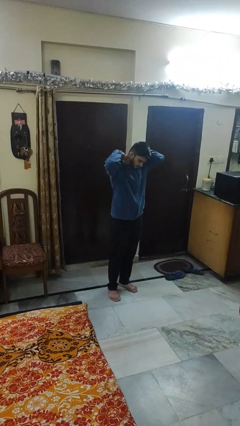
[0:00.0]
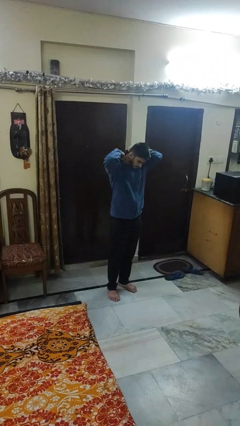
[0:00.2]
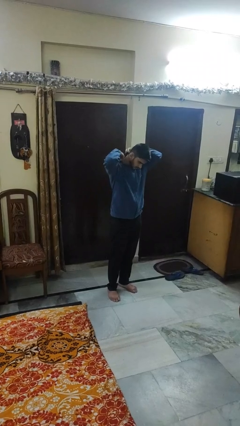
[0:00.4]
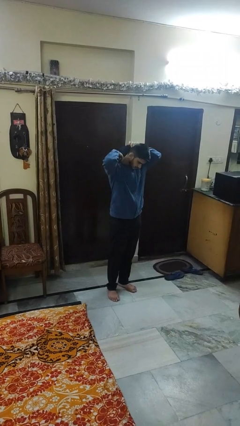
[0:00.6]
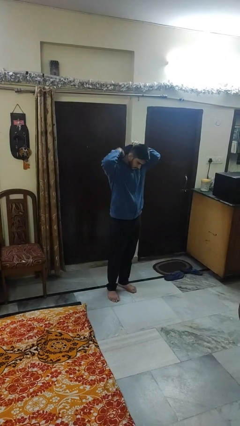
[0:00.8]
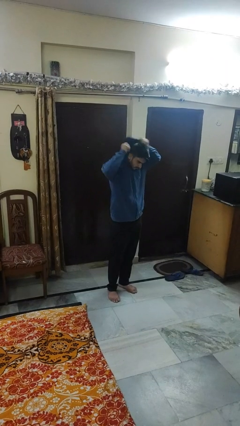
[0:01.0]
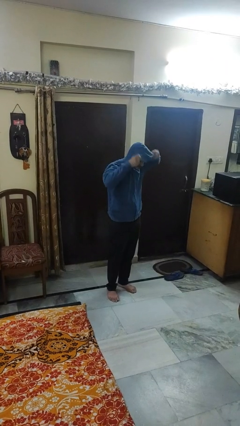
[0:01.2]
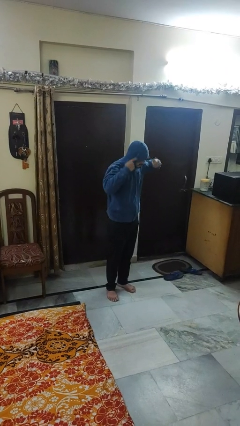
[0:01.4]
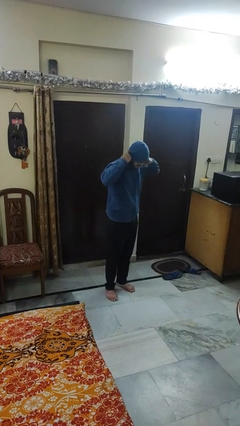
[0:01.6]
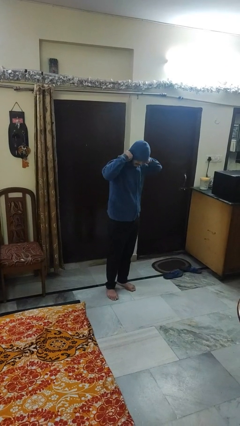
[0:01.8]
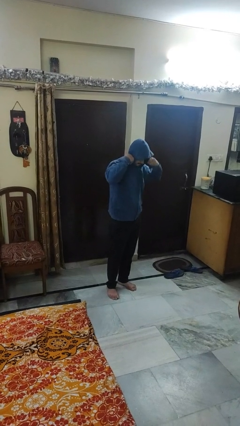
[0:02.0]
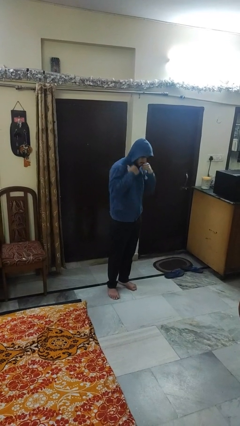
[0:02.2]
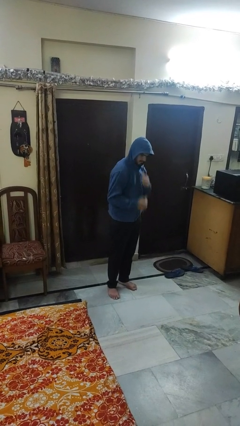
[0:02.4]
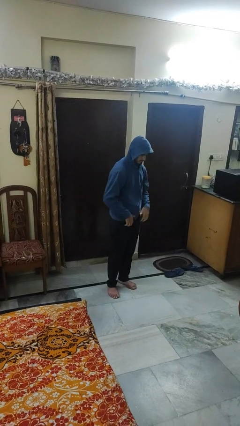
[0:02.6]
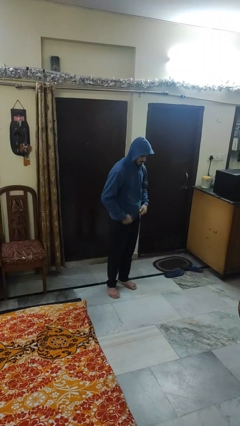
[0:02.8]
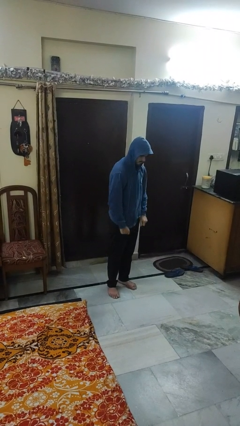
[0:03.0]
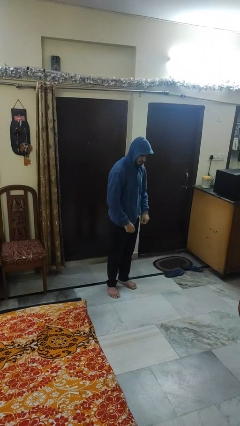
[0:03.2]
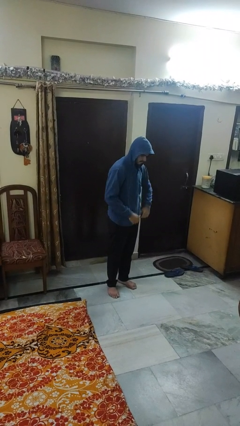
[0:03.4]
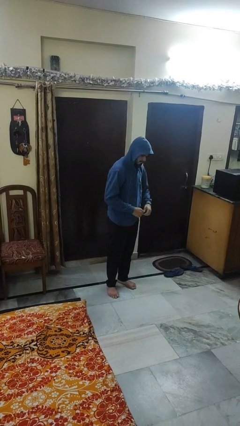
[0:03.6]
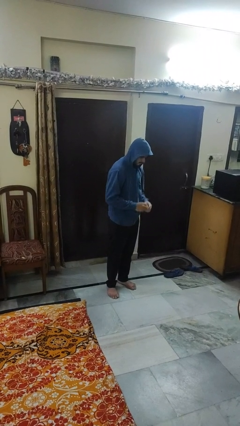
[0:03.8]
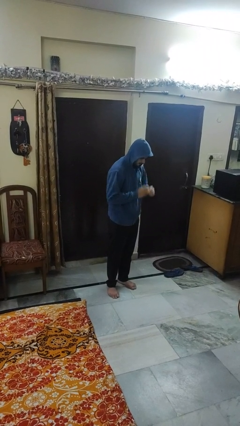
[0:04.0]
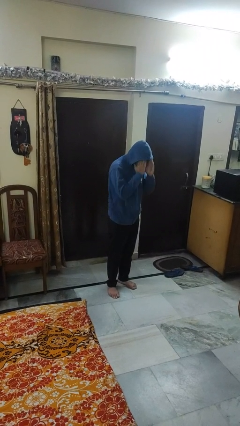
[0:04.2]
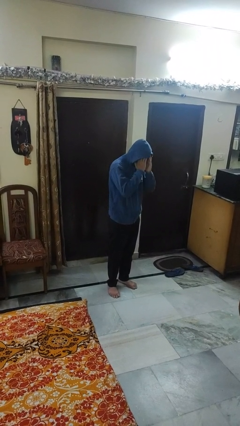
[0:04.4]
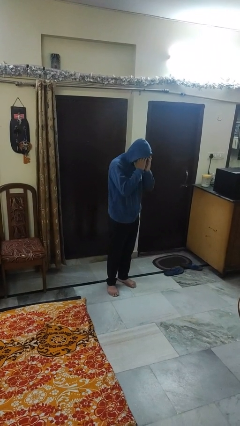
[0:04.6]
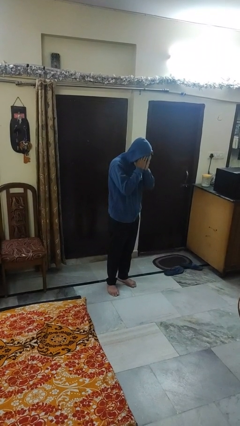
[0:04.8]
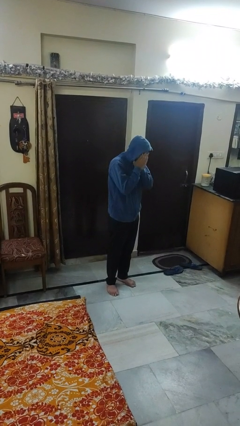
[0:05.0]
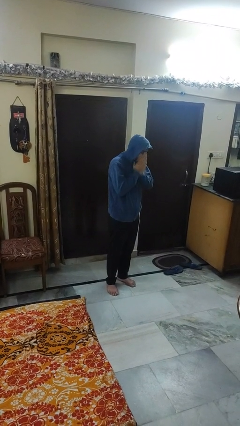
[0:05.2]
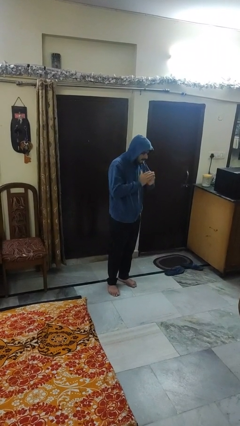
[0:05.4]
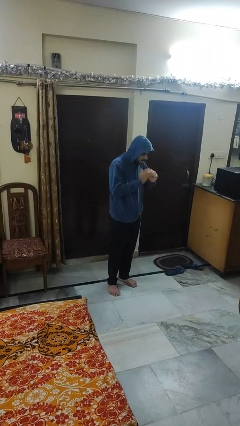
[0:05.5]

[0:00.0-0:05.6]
person puts on hoodie

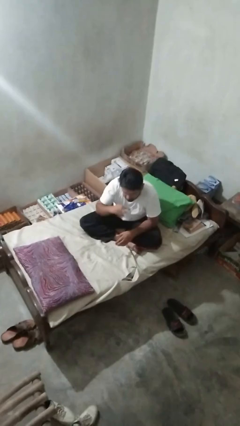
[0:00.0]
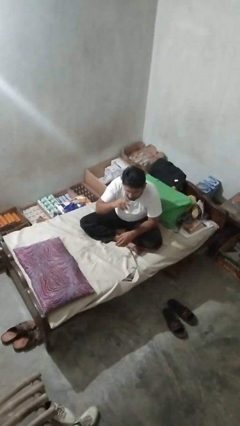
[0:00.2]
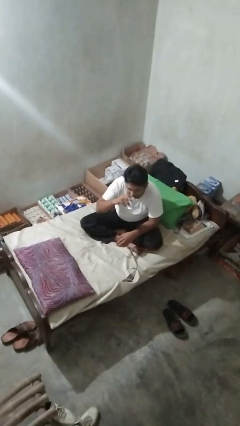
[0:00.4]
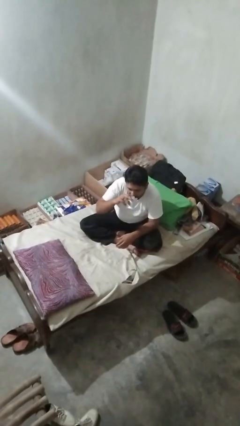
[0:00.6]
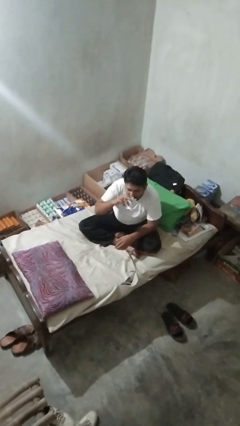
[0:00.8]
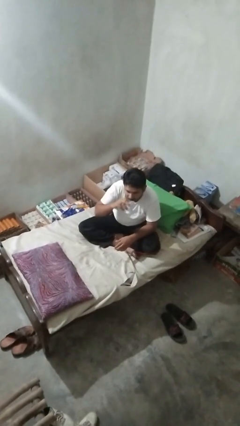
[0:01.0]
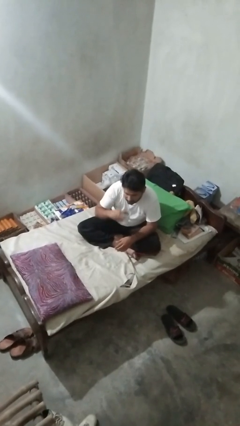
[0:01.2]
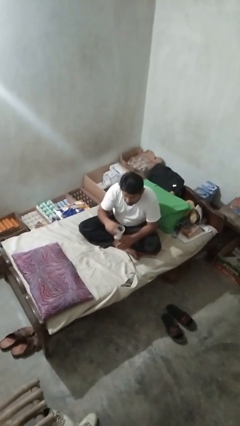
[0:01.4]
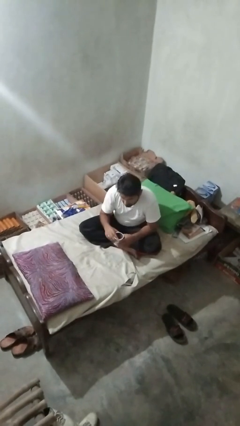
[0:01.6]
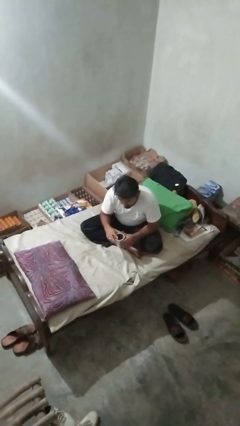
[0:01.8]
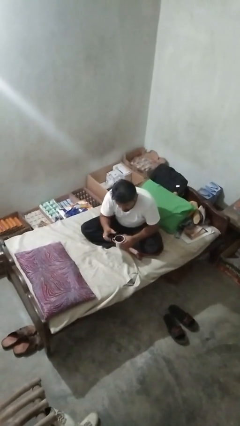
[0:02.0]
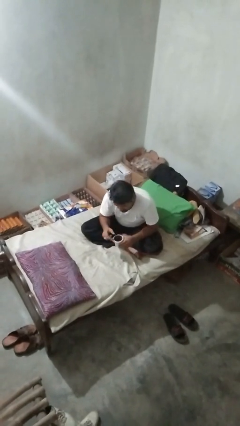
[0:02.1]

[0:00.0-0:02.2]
person drinks from mug

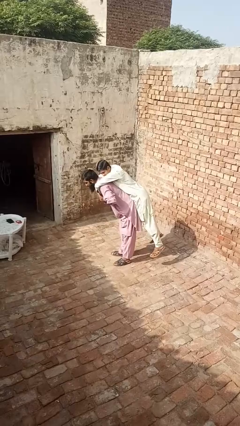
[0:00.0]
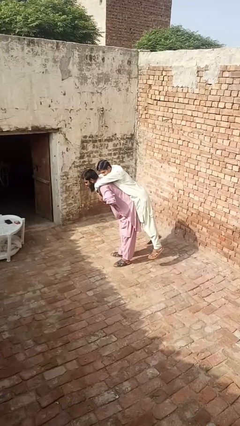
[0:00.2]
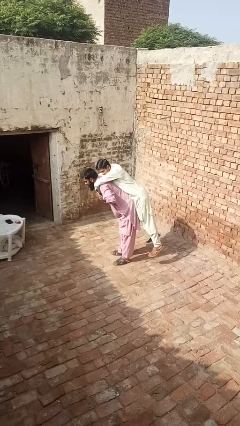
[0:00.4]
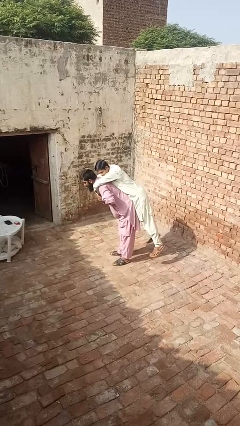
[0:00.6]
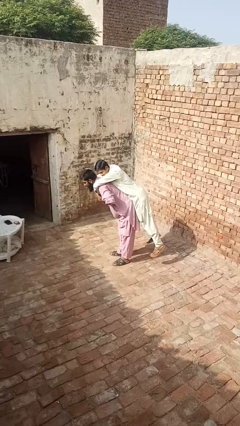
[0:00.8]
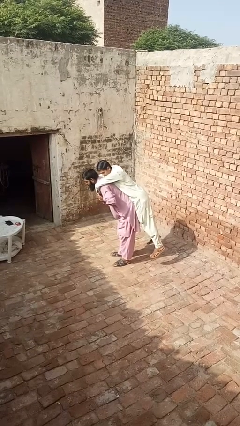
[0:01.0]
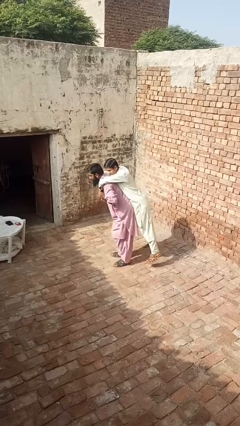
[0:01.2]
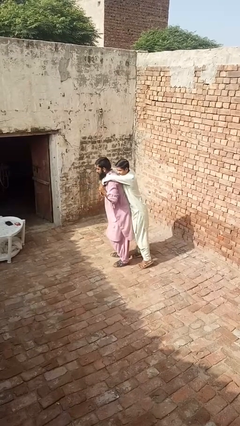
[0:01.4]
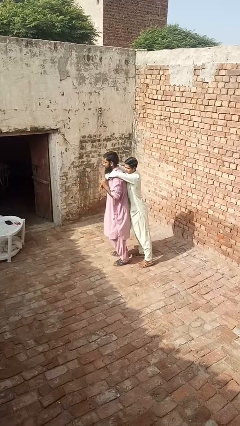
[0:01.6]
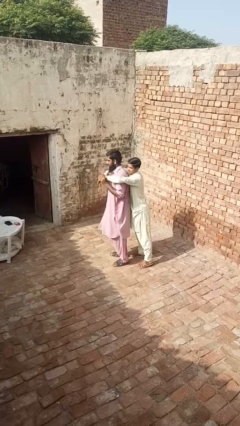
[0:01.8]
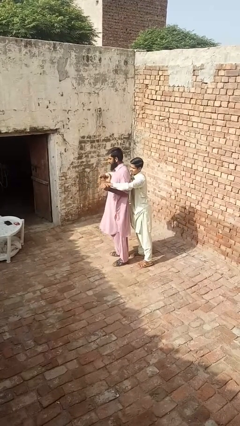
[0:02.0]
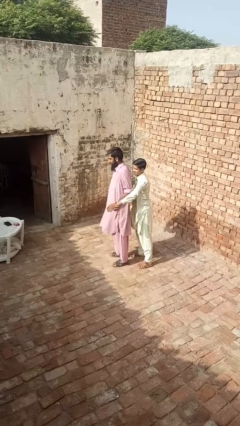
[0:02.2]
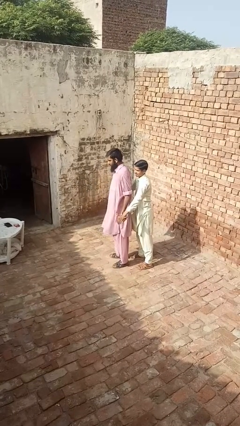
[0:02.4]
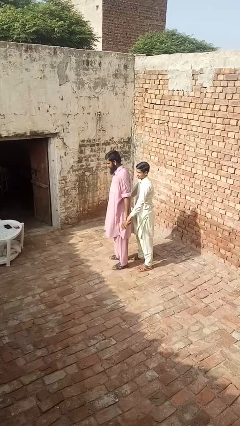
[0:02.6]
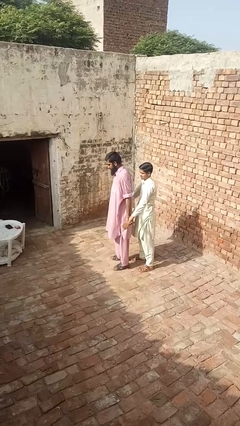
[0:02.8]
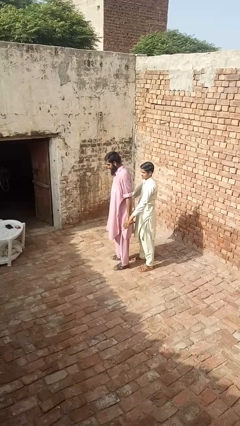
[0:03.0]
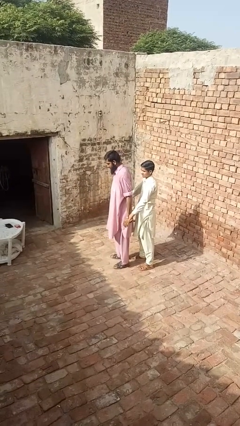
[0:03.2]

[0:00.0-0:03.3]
person puts down person

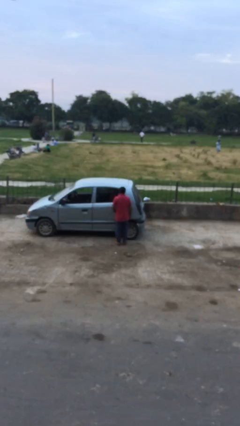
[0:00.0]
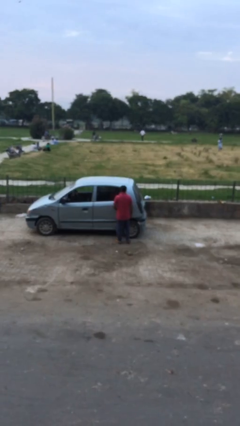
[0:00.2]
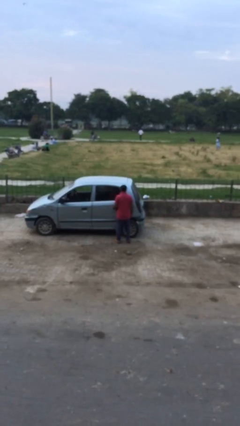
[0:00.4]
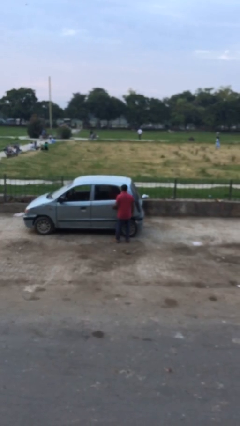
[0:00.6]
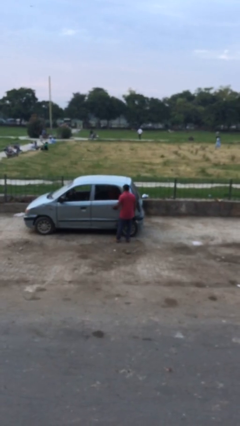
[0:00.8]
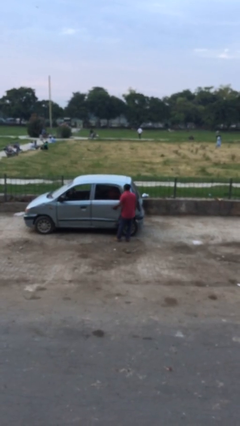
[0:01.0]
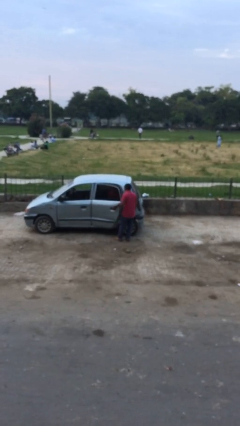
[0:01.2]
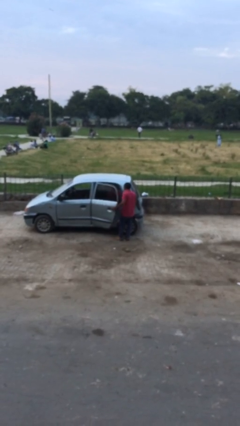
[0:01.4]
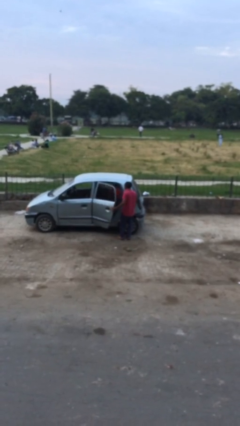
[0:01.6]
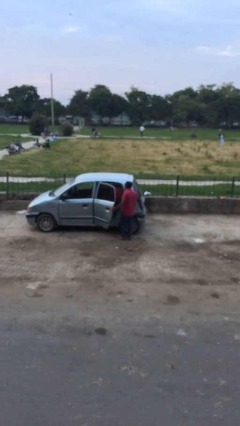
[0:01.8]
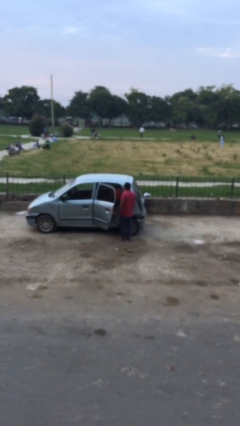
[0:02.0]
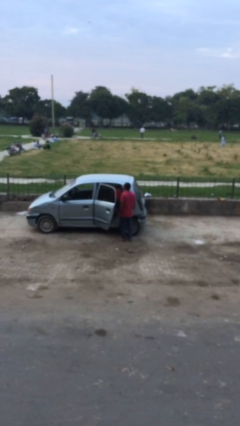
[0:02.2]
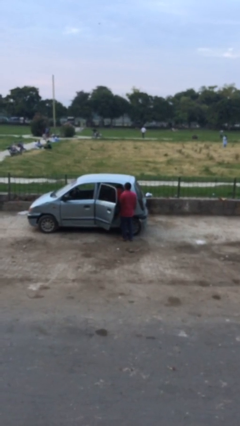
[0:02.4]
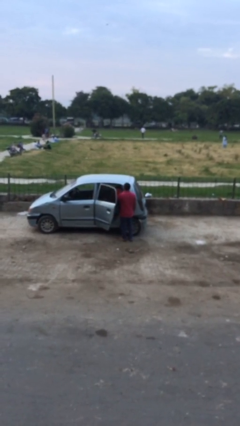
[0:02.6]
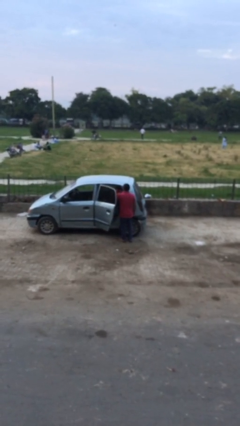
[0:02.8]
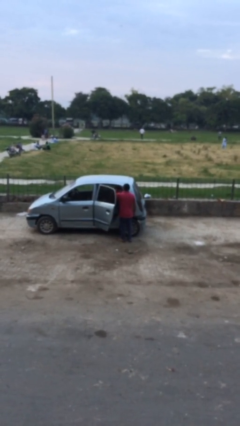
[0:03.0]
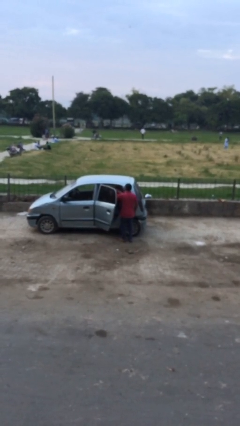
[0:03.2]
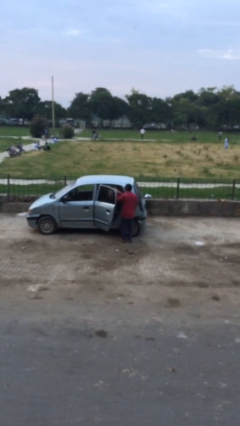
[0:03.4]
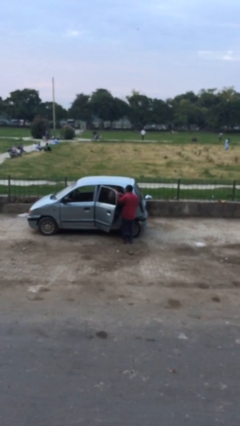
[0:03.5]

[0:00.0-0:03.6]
person opens car door

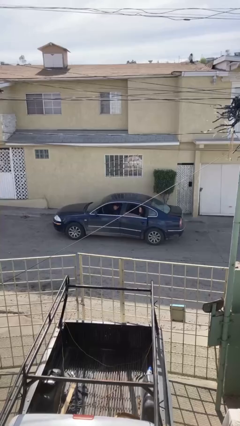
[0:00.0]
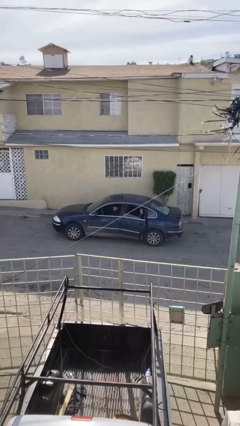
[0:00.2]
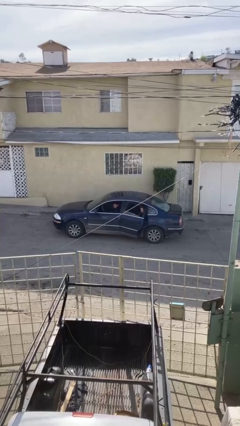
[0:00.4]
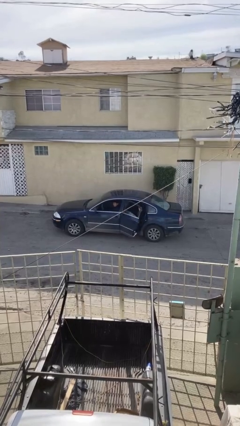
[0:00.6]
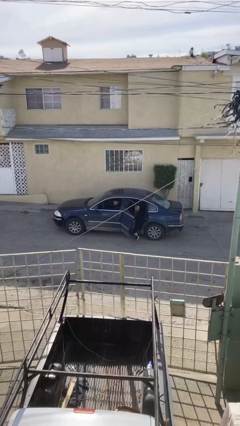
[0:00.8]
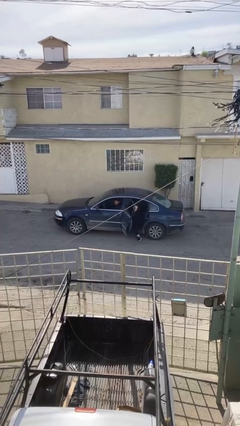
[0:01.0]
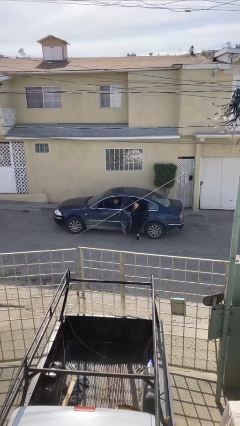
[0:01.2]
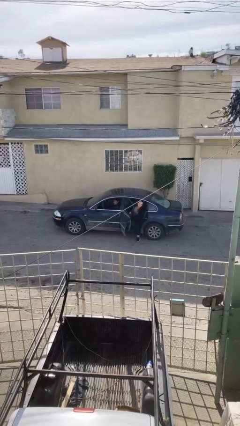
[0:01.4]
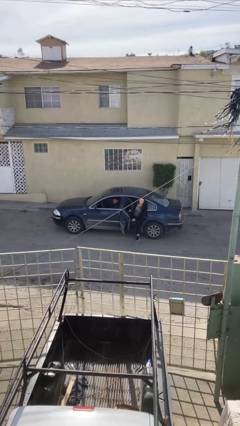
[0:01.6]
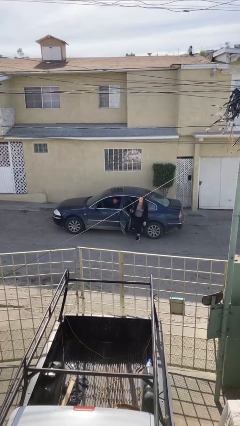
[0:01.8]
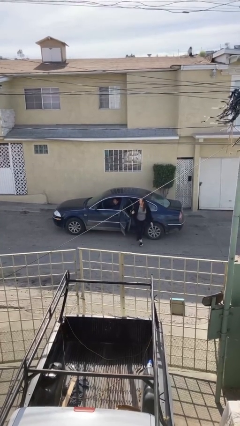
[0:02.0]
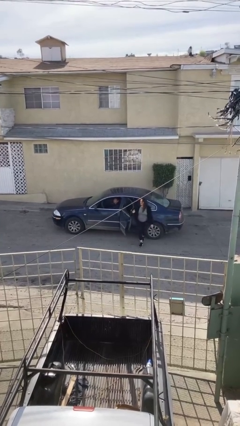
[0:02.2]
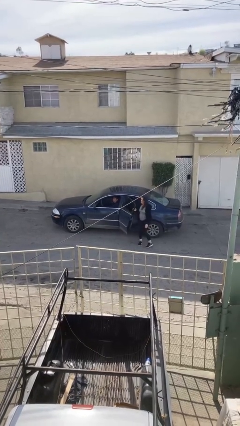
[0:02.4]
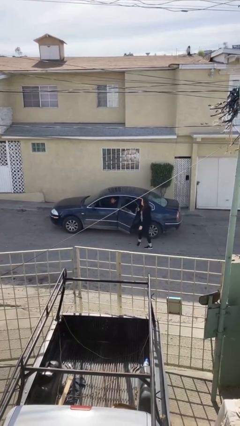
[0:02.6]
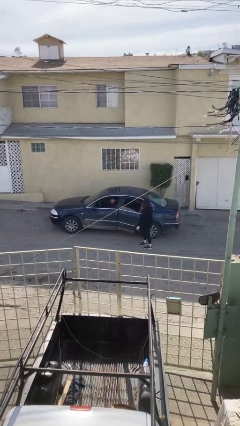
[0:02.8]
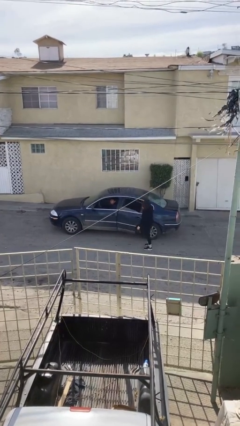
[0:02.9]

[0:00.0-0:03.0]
car drops off person

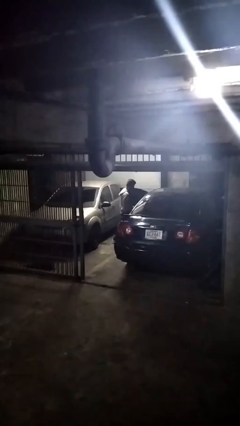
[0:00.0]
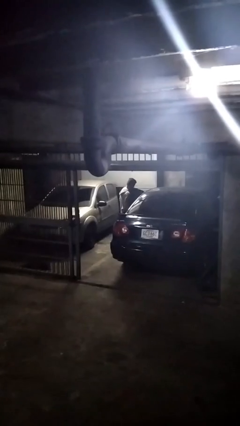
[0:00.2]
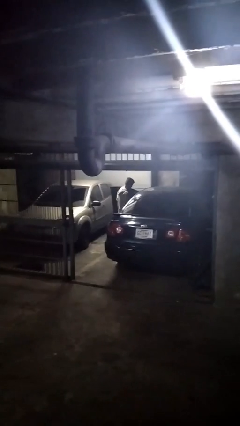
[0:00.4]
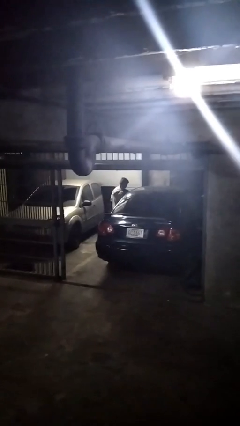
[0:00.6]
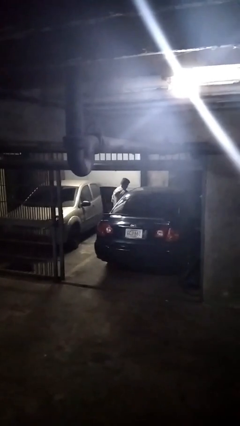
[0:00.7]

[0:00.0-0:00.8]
person enters car
